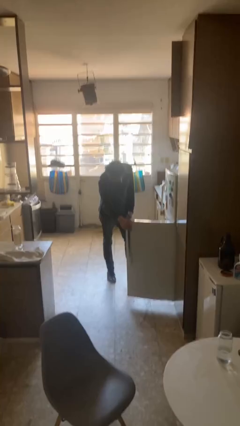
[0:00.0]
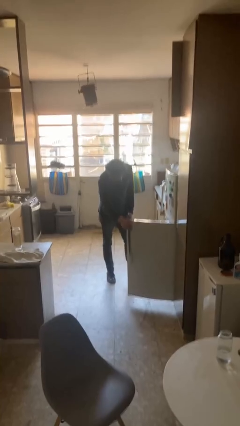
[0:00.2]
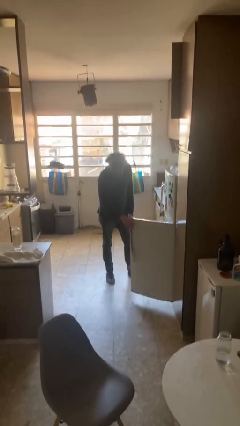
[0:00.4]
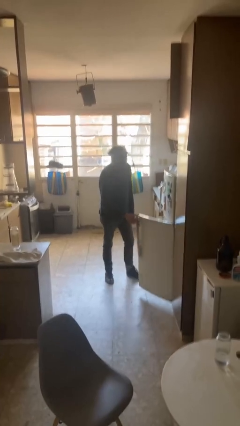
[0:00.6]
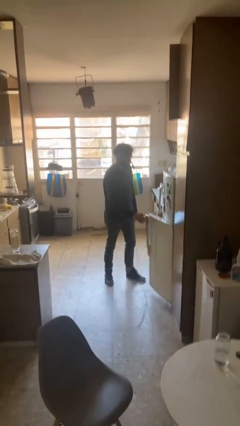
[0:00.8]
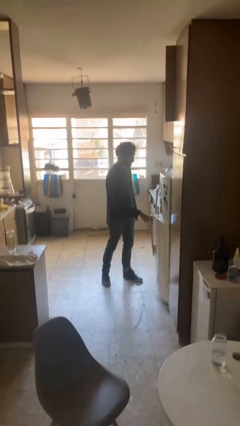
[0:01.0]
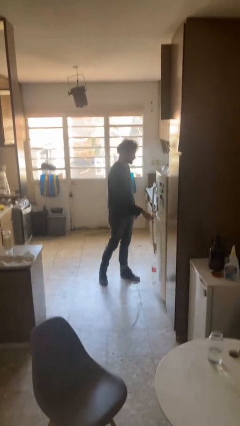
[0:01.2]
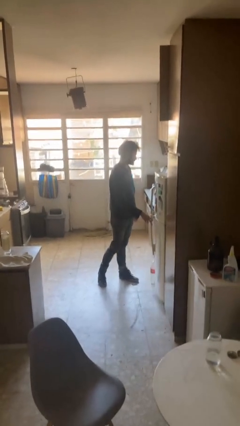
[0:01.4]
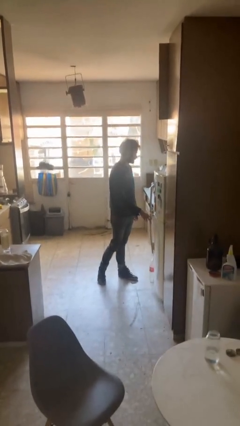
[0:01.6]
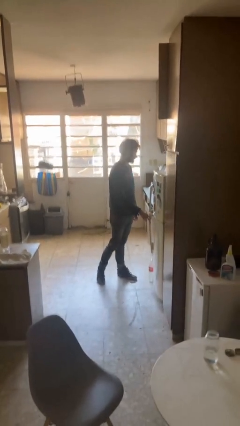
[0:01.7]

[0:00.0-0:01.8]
person closes refrigerator

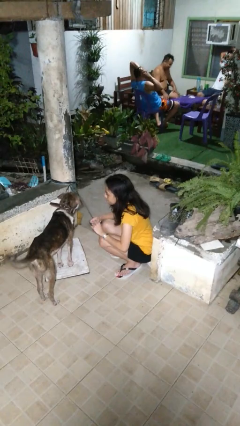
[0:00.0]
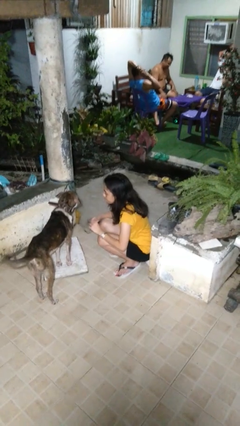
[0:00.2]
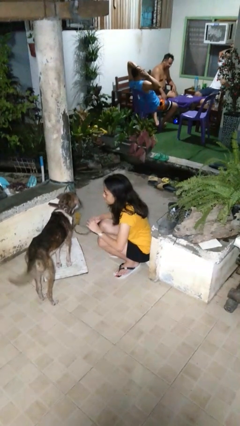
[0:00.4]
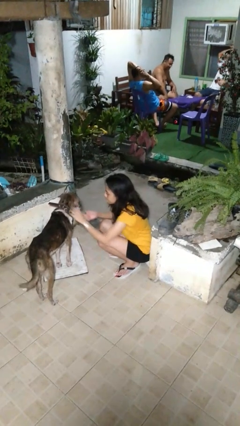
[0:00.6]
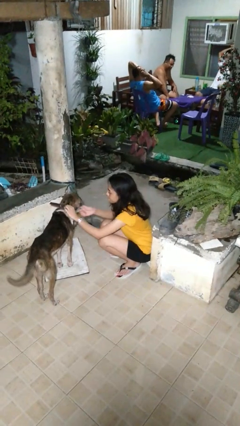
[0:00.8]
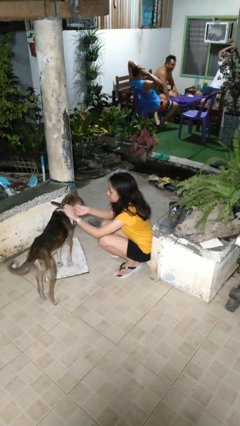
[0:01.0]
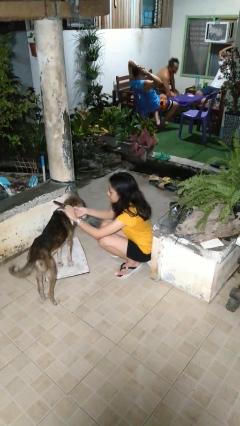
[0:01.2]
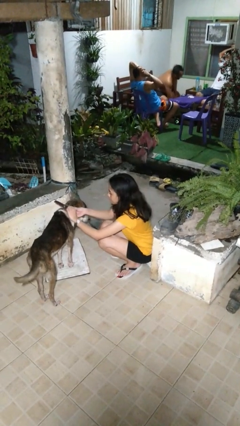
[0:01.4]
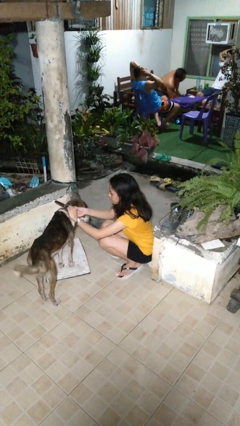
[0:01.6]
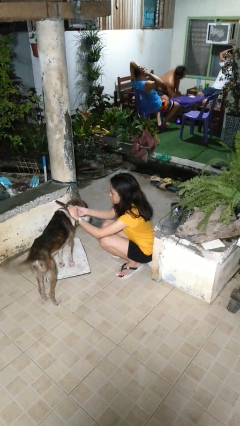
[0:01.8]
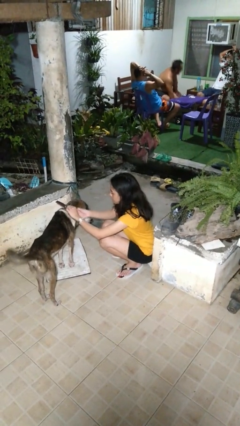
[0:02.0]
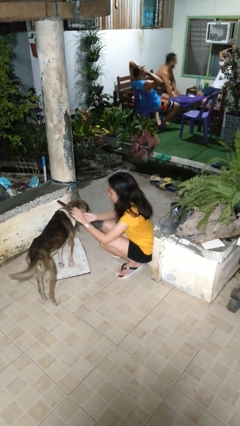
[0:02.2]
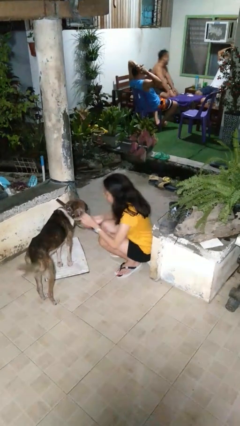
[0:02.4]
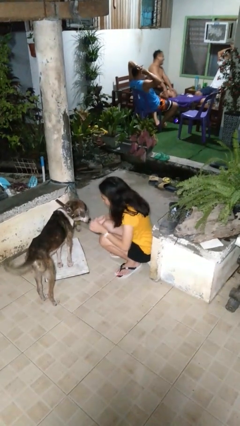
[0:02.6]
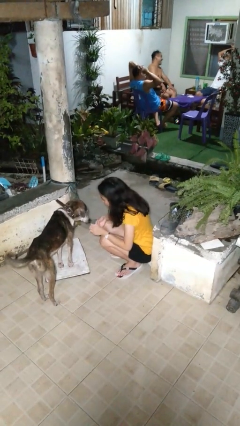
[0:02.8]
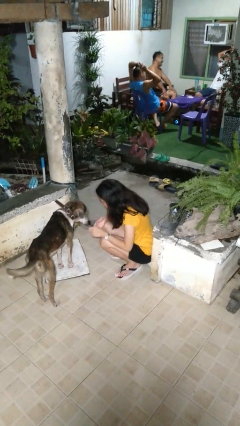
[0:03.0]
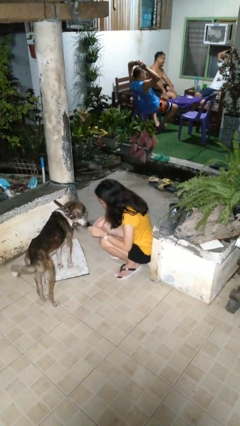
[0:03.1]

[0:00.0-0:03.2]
person attaches leash to dog

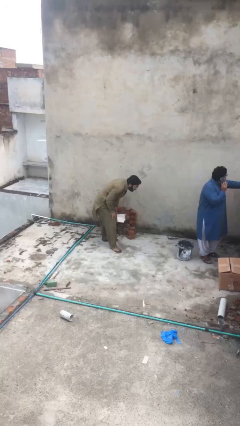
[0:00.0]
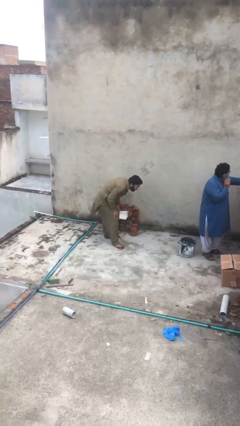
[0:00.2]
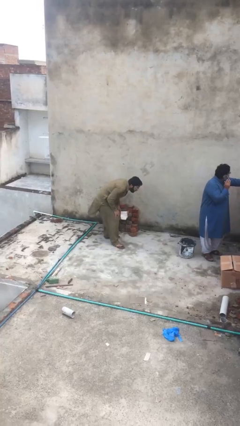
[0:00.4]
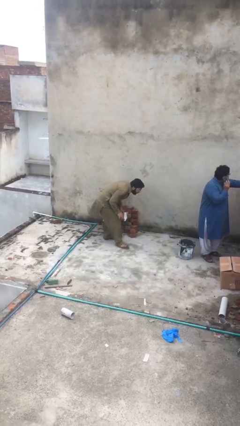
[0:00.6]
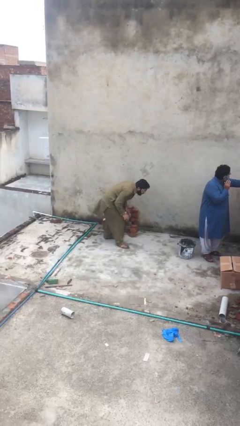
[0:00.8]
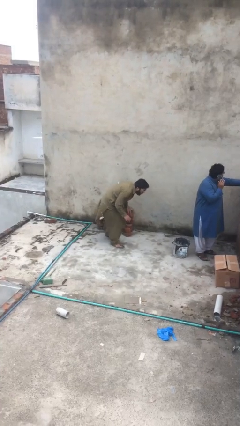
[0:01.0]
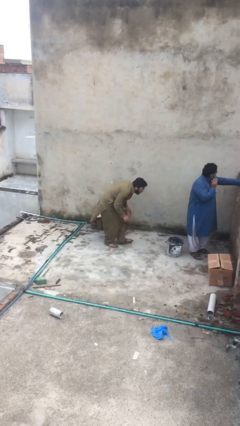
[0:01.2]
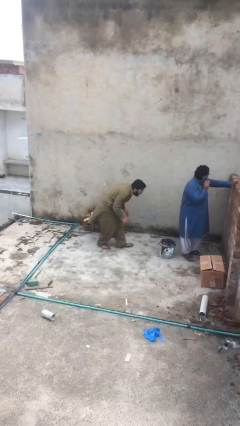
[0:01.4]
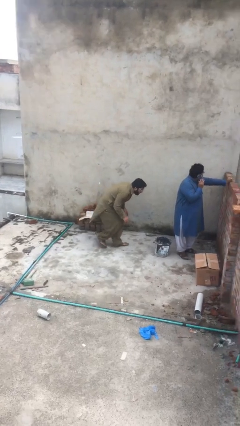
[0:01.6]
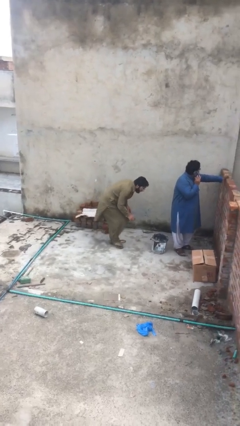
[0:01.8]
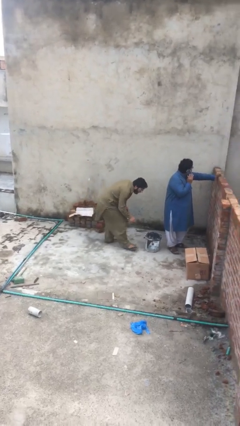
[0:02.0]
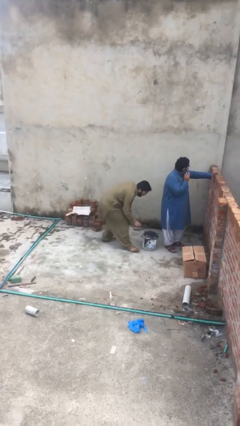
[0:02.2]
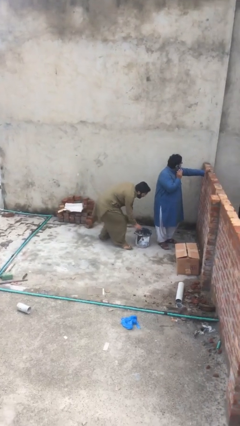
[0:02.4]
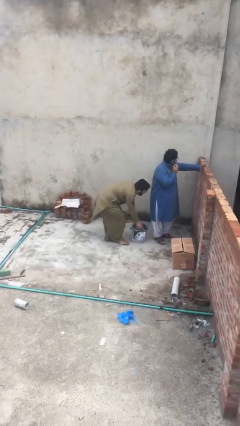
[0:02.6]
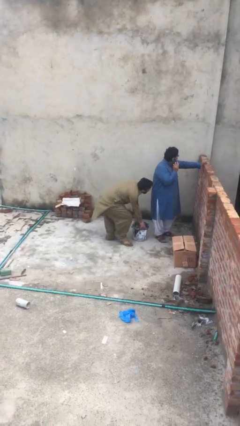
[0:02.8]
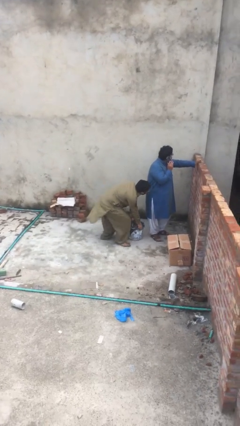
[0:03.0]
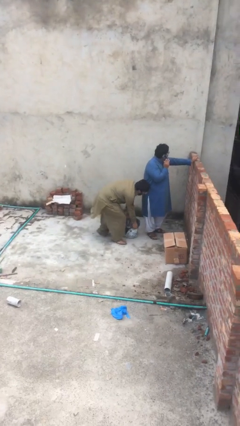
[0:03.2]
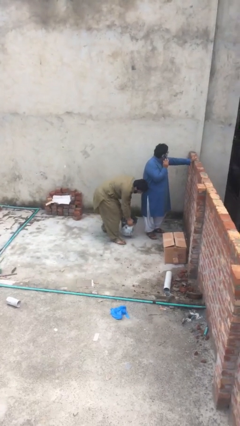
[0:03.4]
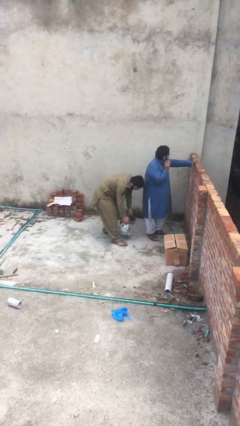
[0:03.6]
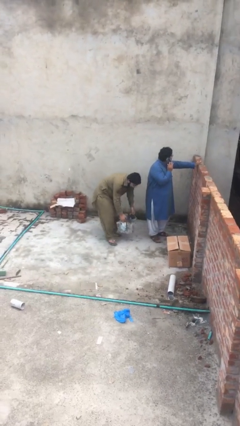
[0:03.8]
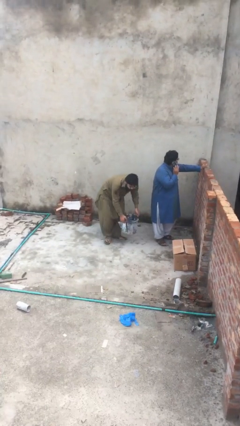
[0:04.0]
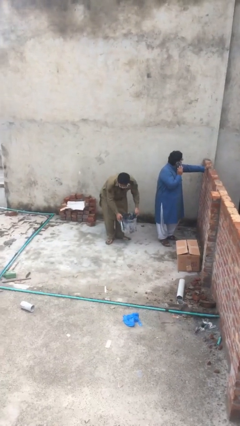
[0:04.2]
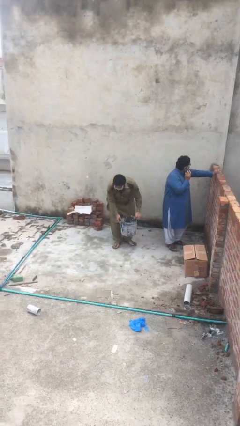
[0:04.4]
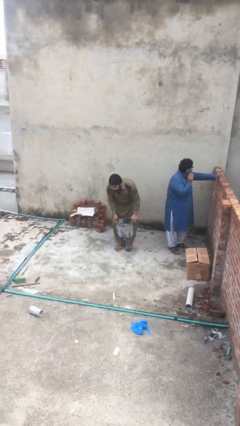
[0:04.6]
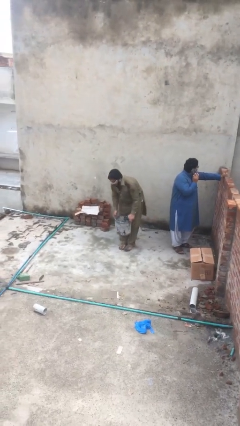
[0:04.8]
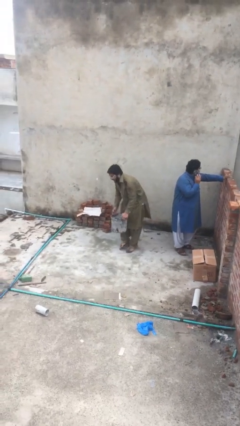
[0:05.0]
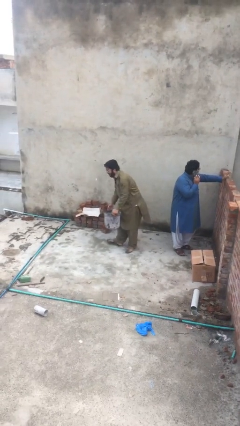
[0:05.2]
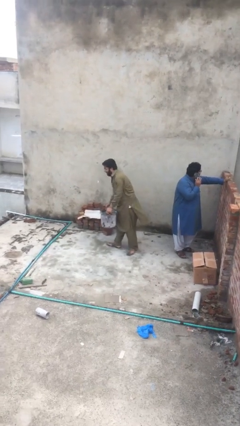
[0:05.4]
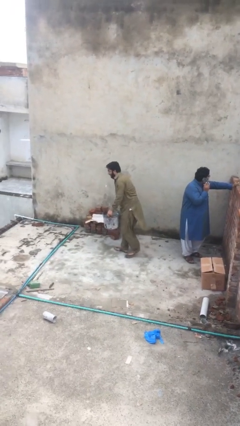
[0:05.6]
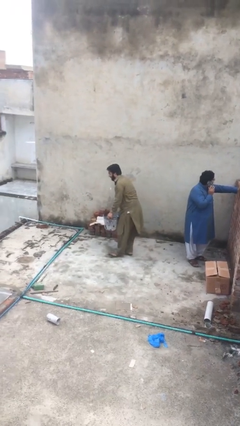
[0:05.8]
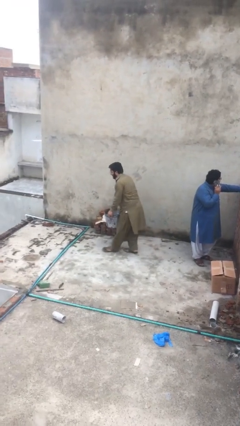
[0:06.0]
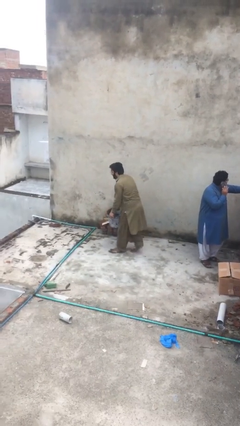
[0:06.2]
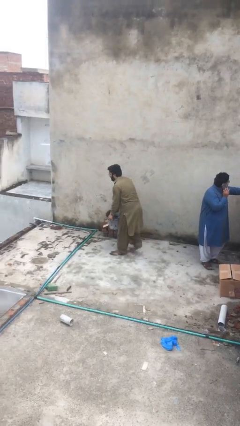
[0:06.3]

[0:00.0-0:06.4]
person steals object from person

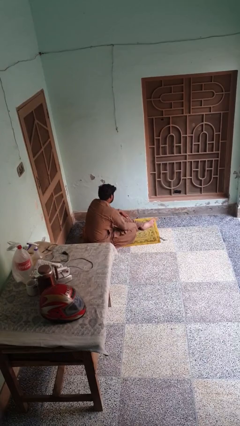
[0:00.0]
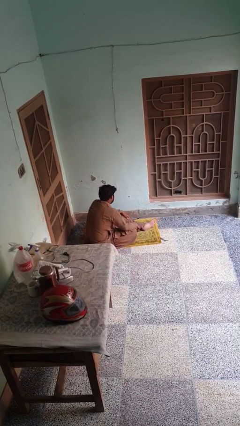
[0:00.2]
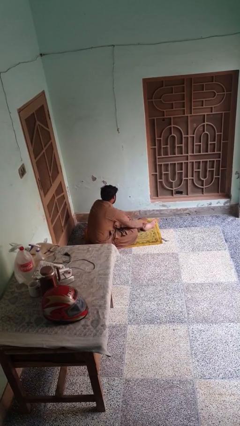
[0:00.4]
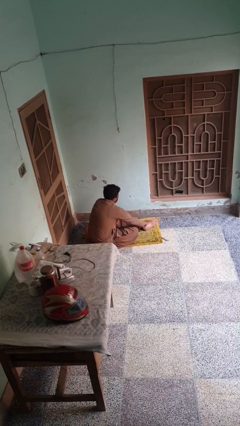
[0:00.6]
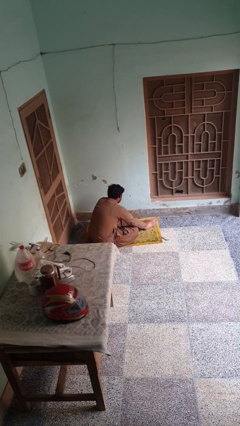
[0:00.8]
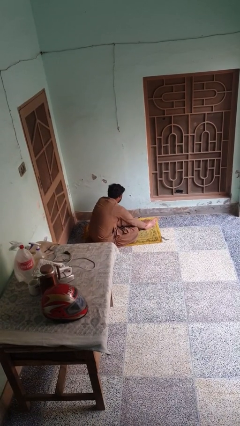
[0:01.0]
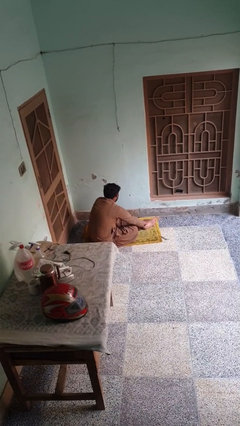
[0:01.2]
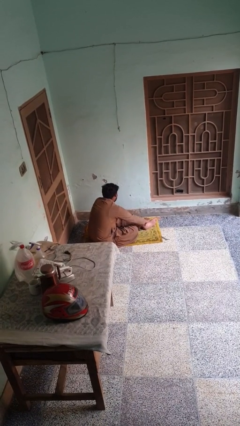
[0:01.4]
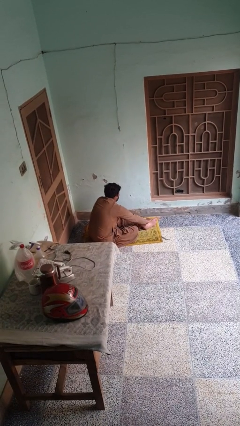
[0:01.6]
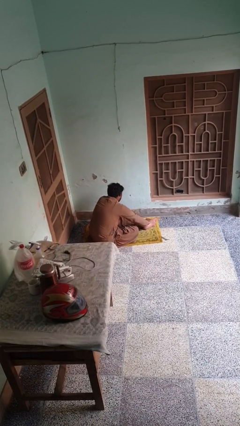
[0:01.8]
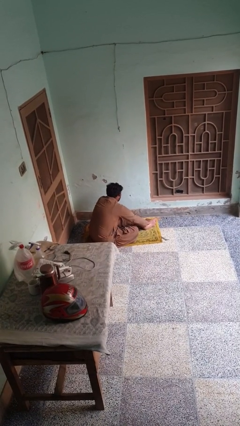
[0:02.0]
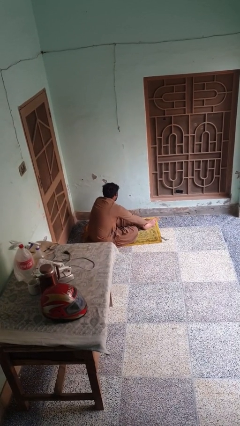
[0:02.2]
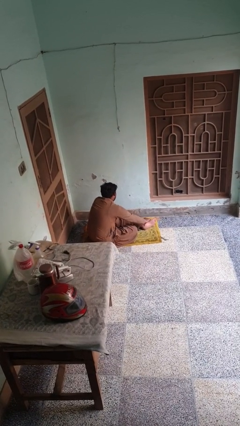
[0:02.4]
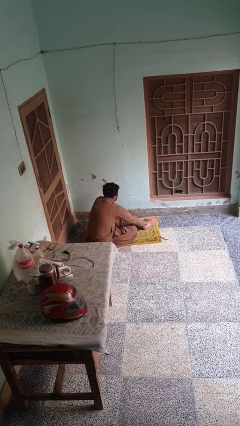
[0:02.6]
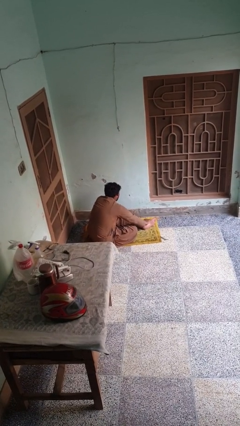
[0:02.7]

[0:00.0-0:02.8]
person rubs foot

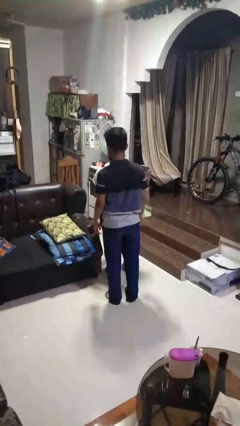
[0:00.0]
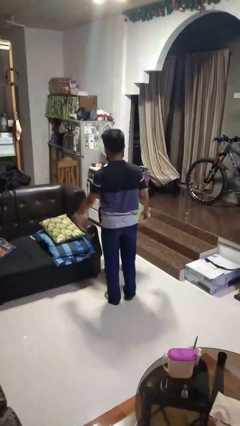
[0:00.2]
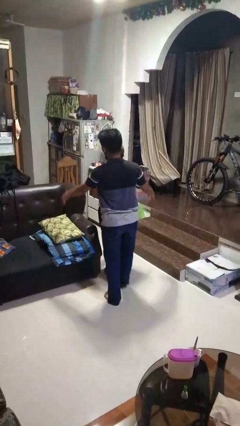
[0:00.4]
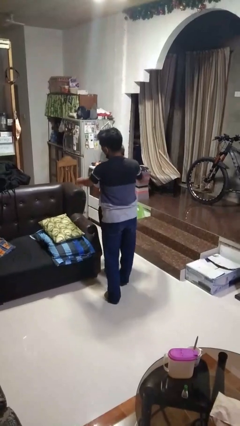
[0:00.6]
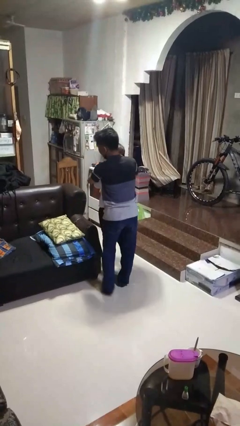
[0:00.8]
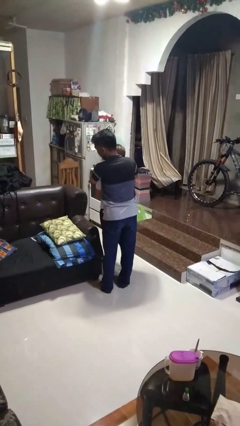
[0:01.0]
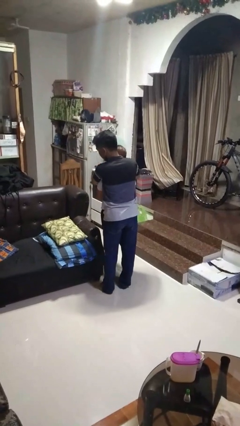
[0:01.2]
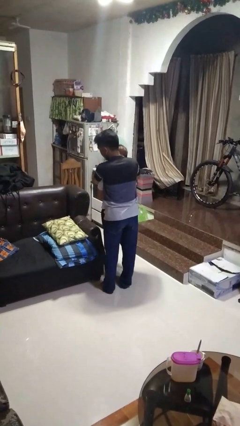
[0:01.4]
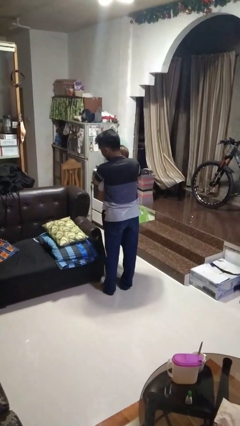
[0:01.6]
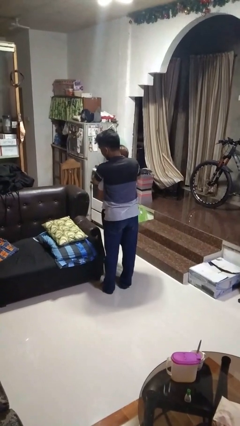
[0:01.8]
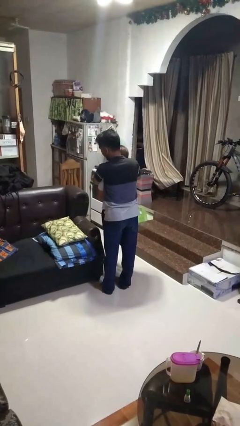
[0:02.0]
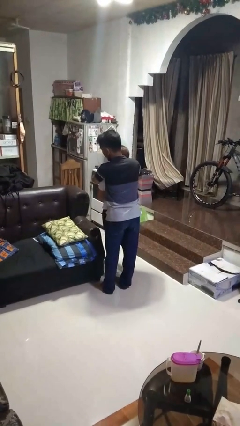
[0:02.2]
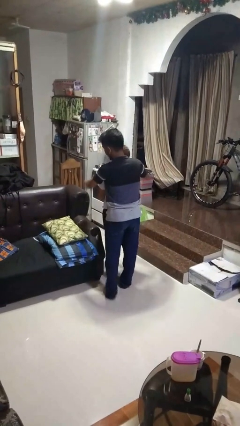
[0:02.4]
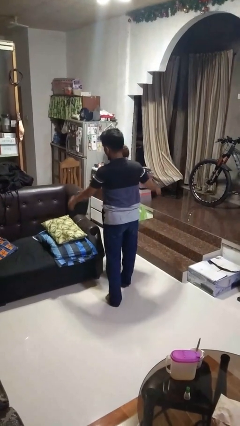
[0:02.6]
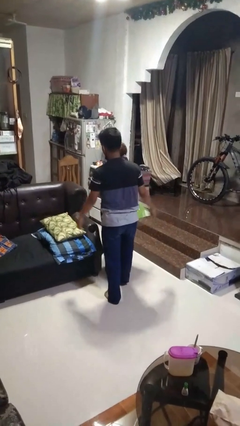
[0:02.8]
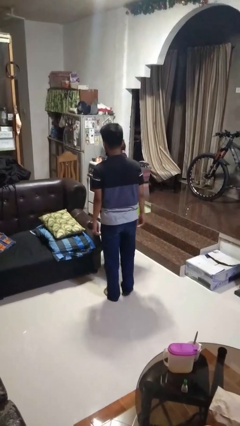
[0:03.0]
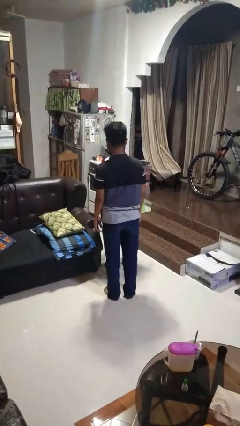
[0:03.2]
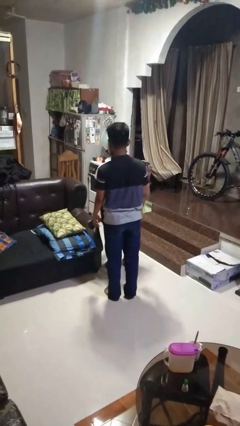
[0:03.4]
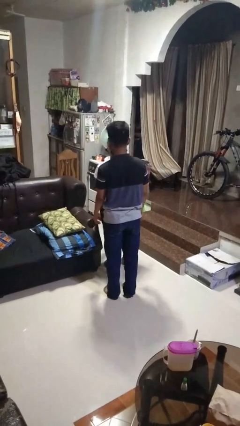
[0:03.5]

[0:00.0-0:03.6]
person hugs person from behind
